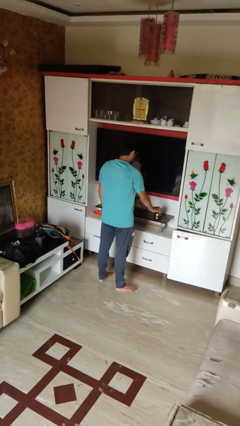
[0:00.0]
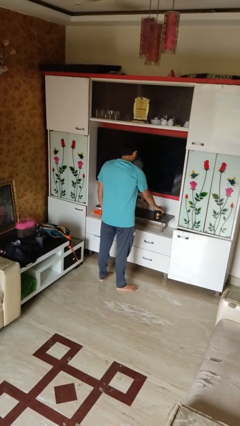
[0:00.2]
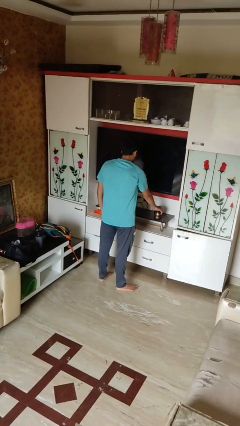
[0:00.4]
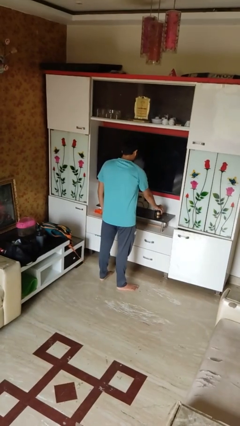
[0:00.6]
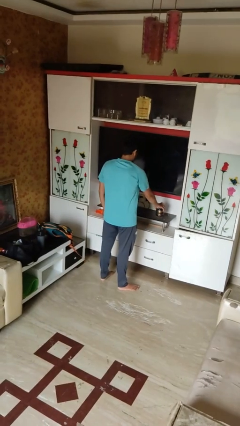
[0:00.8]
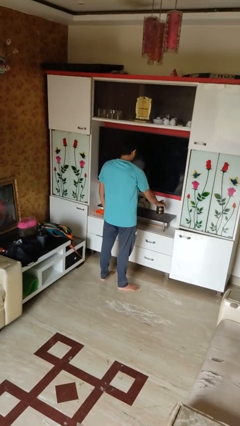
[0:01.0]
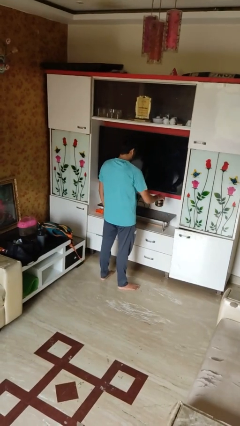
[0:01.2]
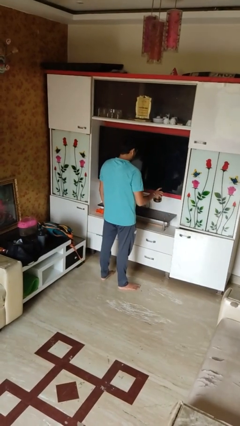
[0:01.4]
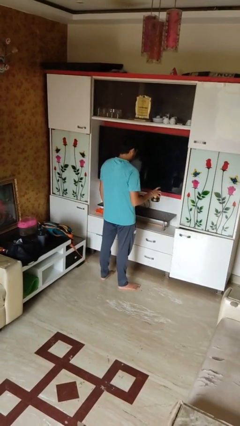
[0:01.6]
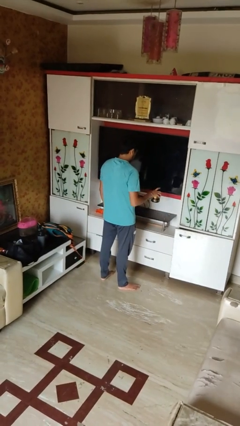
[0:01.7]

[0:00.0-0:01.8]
person picks up object from countertop

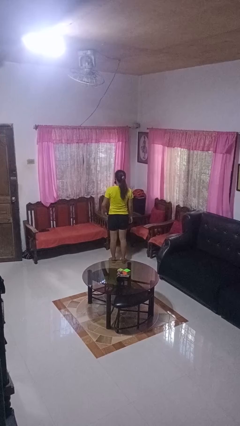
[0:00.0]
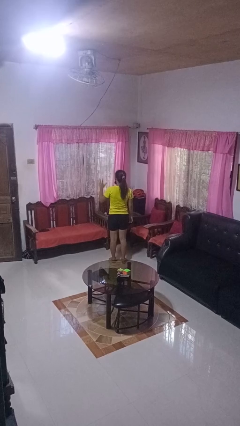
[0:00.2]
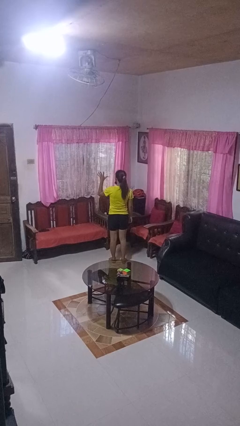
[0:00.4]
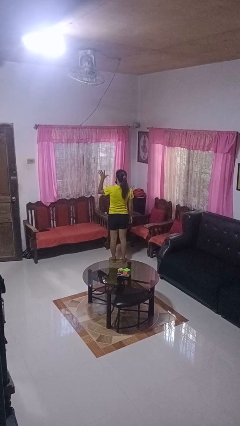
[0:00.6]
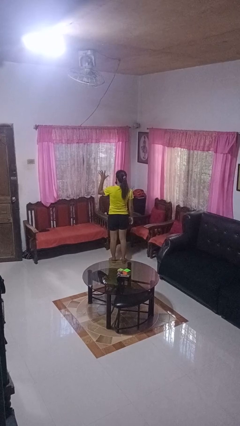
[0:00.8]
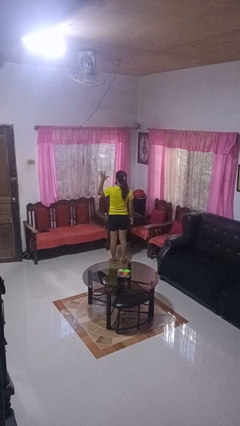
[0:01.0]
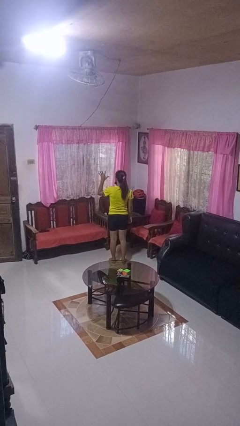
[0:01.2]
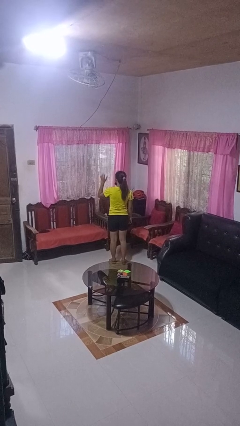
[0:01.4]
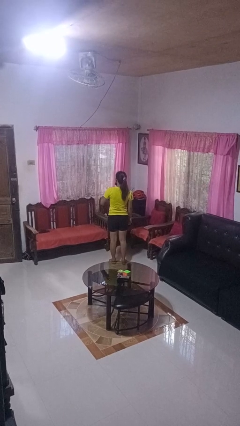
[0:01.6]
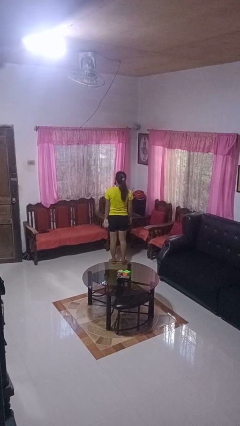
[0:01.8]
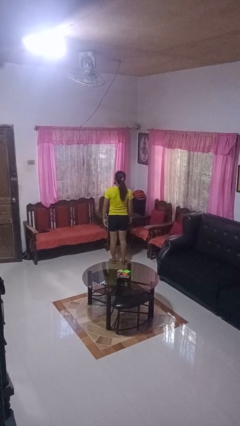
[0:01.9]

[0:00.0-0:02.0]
person gestures number five

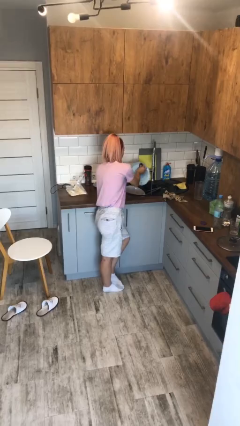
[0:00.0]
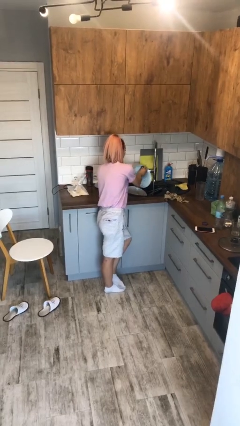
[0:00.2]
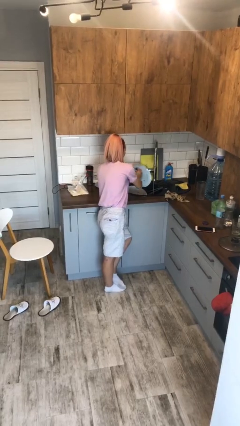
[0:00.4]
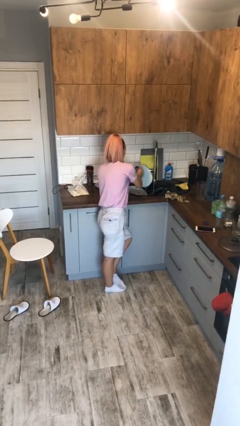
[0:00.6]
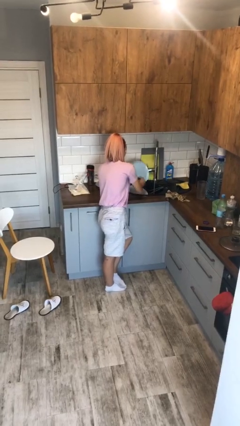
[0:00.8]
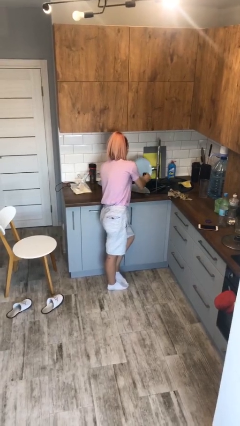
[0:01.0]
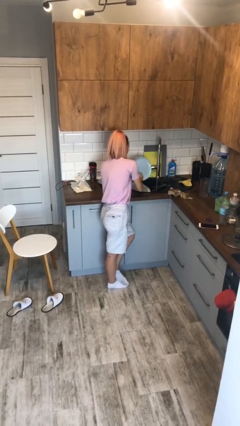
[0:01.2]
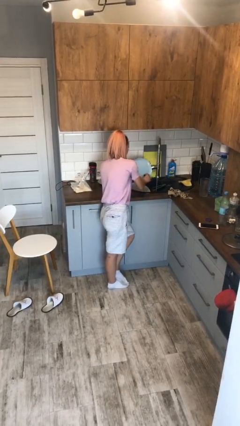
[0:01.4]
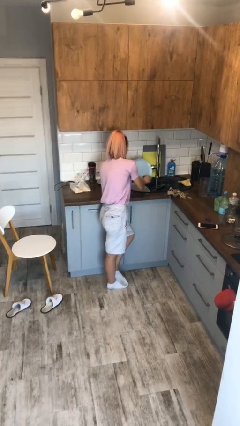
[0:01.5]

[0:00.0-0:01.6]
person washes dish

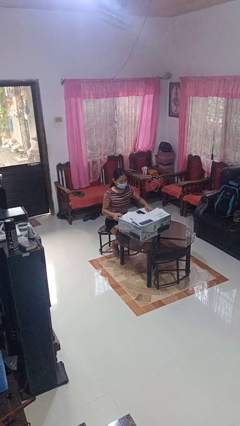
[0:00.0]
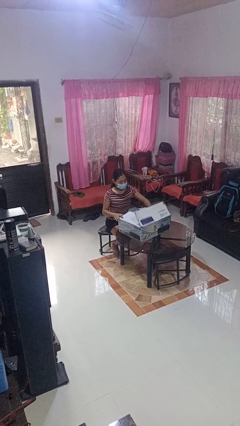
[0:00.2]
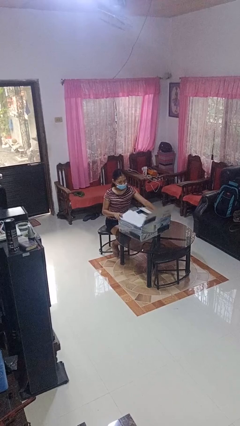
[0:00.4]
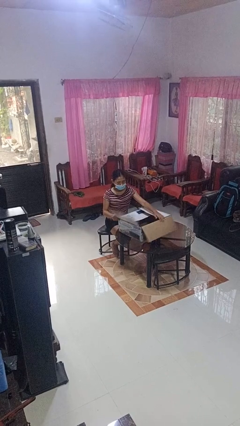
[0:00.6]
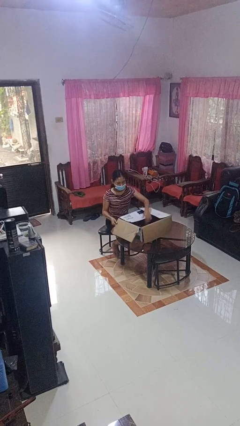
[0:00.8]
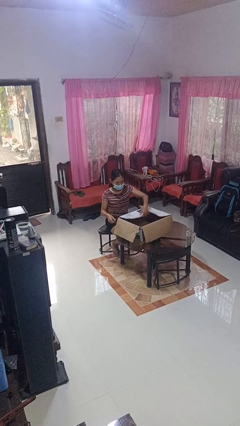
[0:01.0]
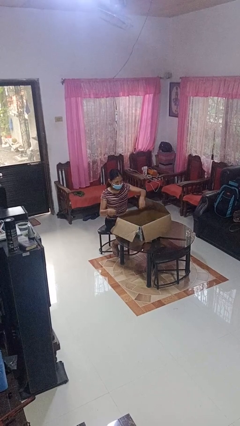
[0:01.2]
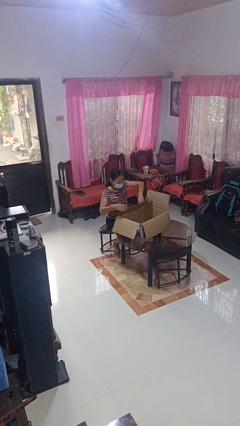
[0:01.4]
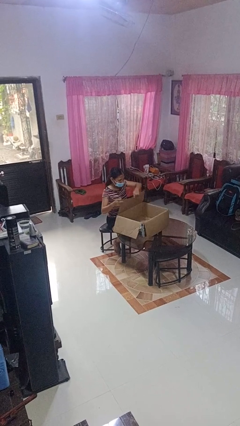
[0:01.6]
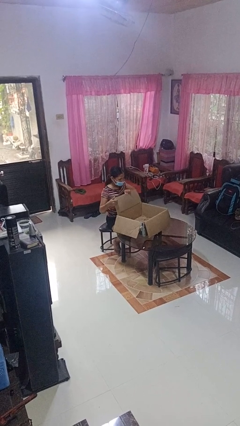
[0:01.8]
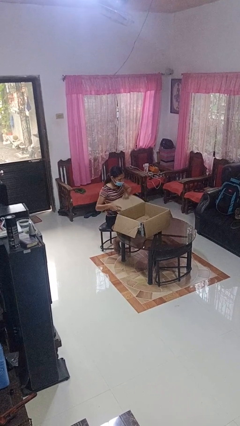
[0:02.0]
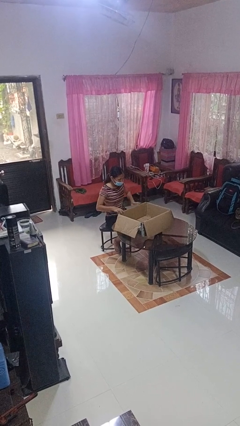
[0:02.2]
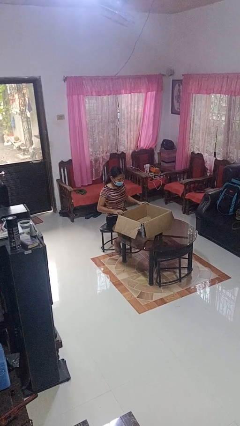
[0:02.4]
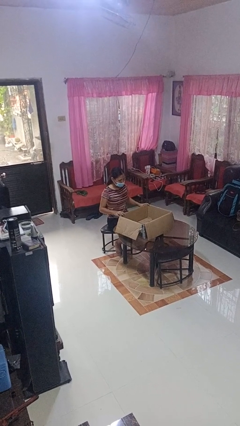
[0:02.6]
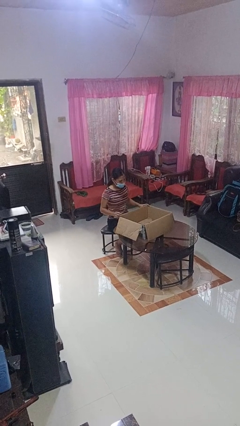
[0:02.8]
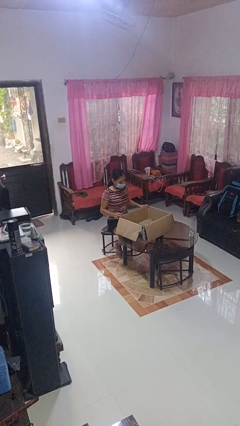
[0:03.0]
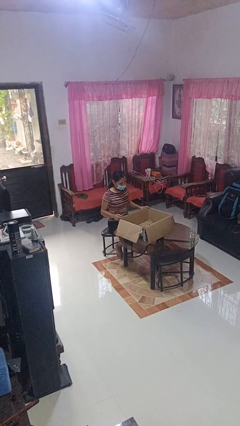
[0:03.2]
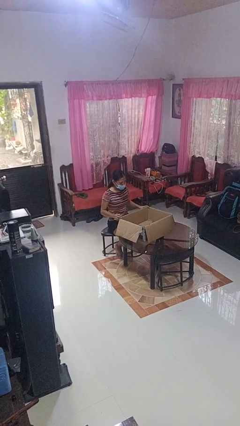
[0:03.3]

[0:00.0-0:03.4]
person opens box

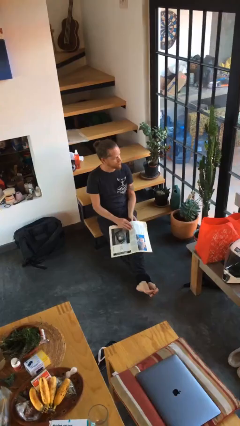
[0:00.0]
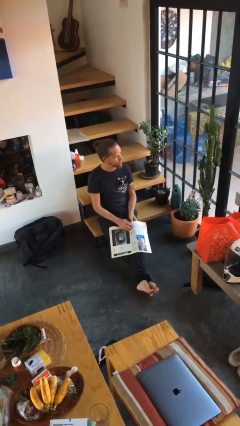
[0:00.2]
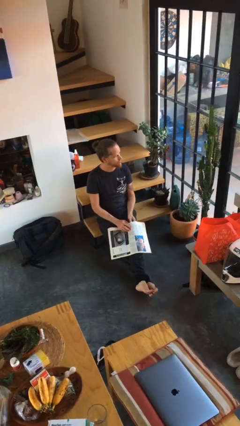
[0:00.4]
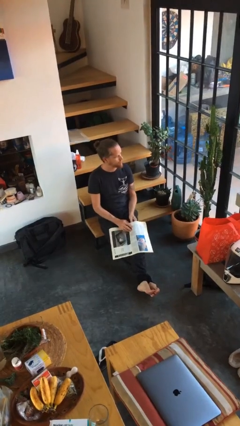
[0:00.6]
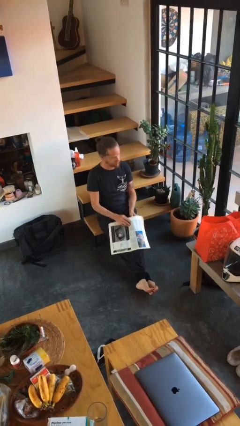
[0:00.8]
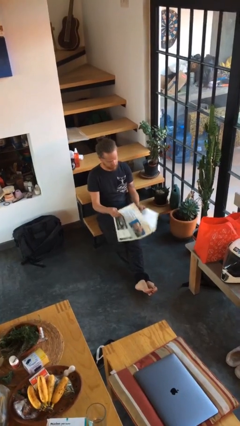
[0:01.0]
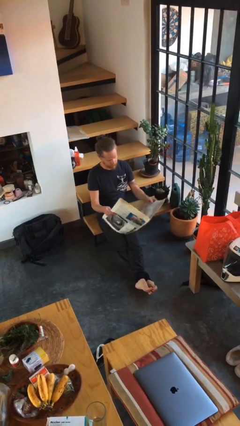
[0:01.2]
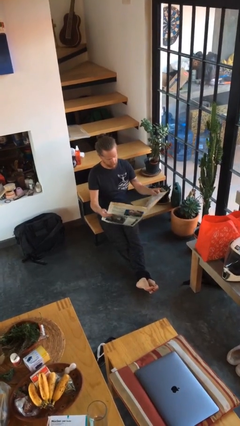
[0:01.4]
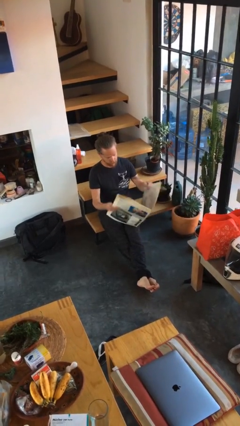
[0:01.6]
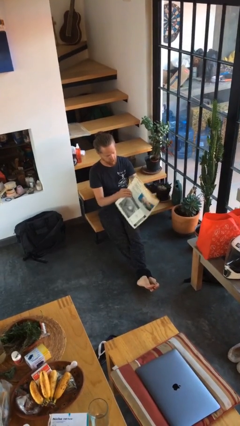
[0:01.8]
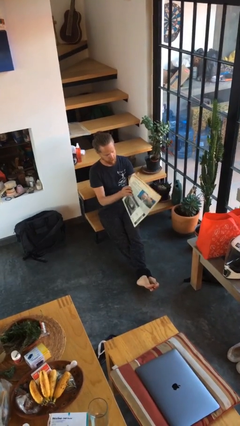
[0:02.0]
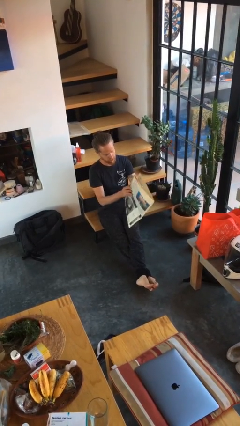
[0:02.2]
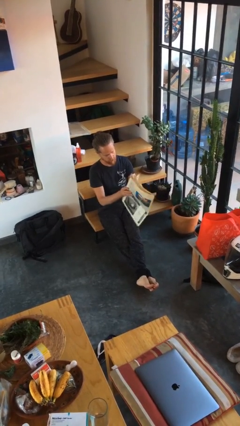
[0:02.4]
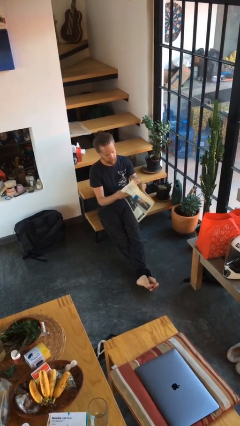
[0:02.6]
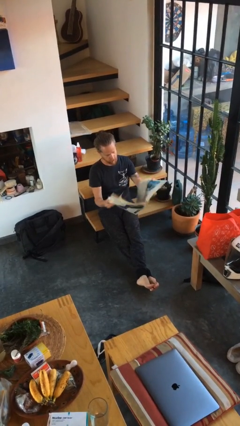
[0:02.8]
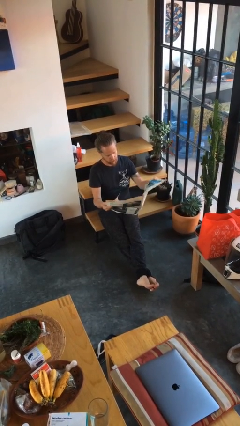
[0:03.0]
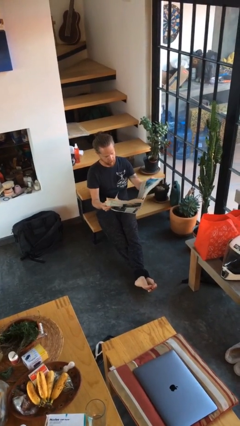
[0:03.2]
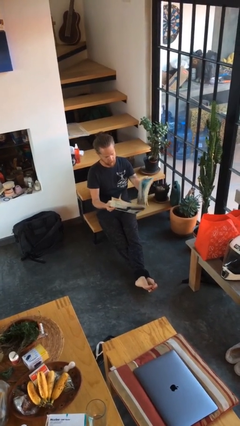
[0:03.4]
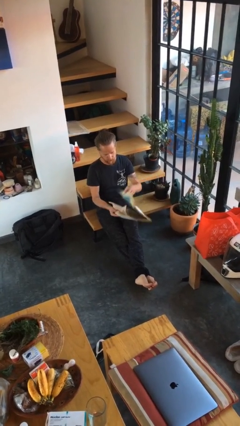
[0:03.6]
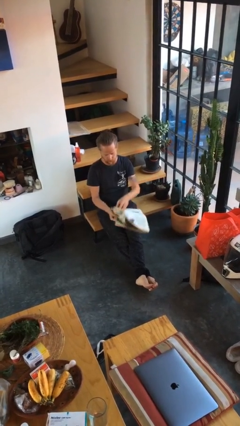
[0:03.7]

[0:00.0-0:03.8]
person reads newspaper

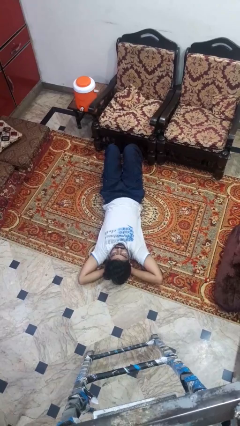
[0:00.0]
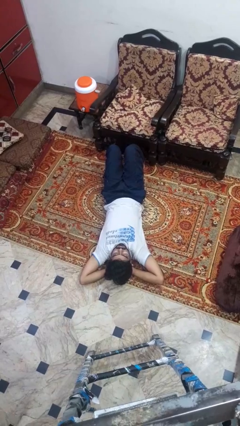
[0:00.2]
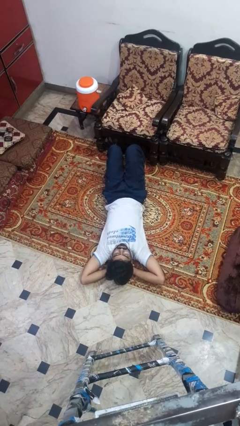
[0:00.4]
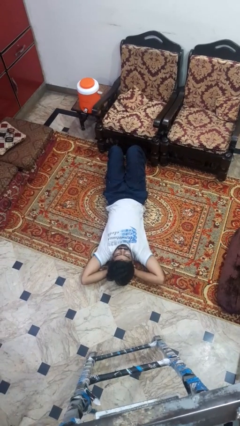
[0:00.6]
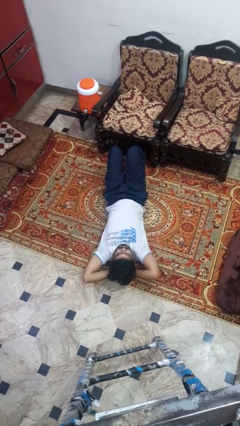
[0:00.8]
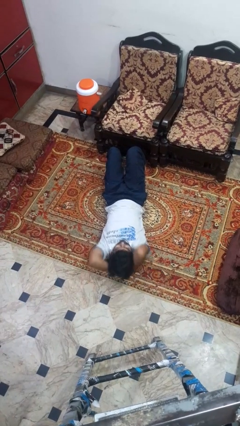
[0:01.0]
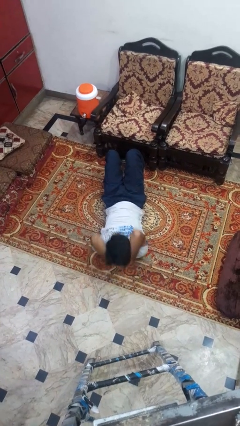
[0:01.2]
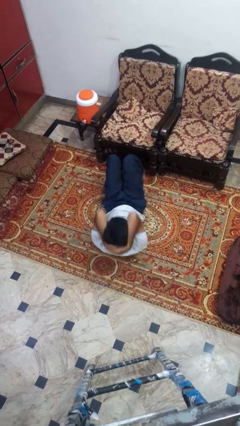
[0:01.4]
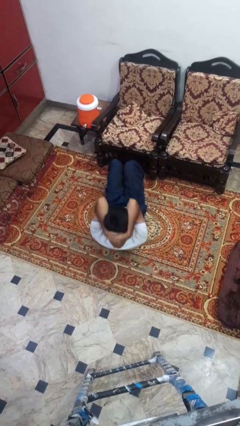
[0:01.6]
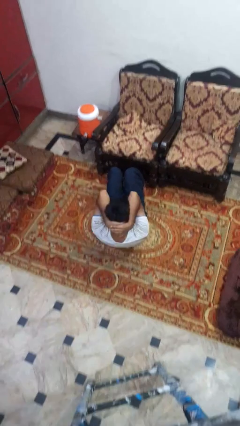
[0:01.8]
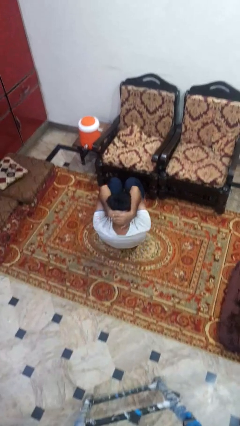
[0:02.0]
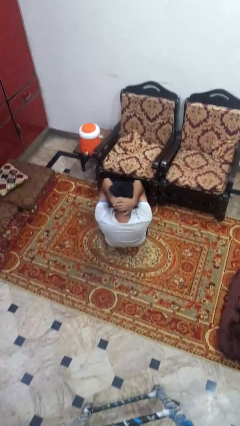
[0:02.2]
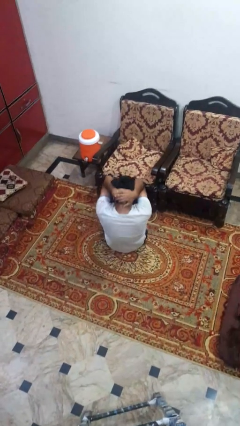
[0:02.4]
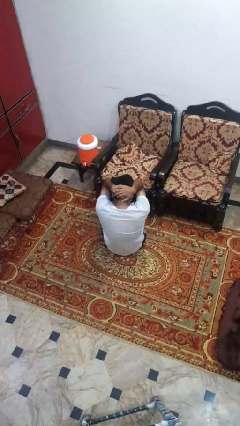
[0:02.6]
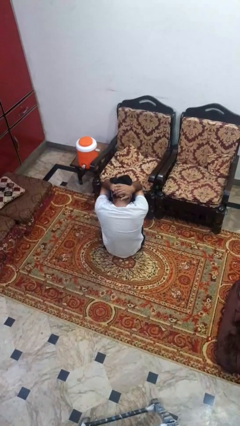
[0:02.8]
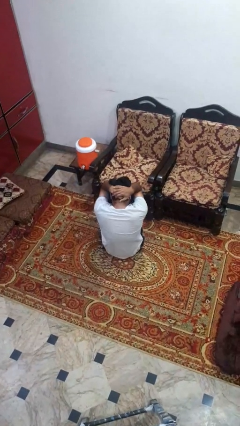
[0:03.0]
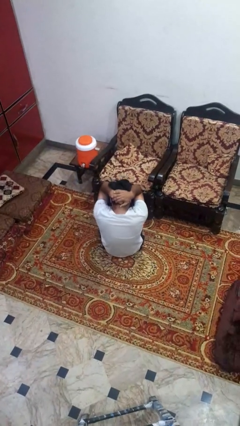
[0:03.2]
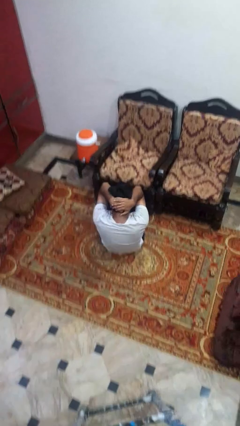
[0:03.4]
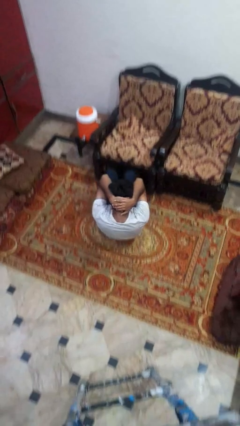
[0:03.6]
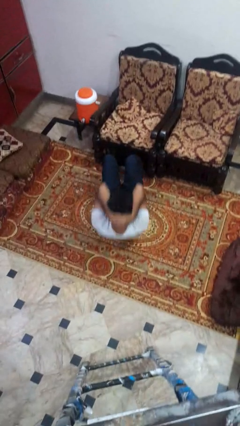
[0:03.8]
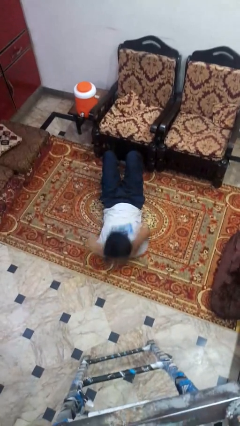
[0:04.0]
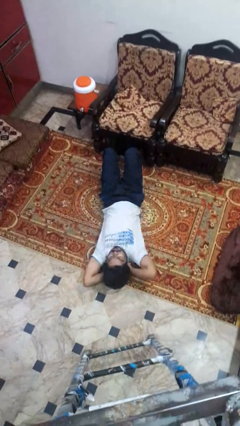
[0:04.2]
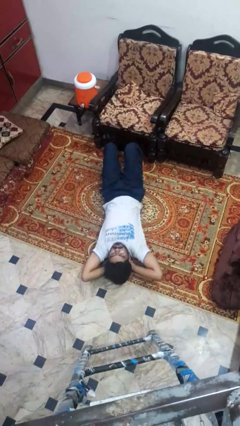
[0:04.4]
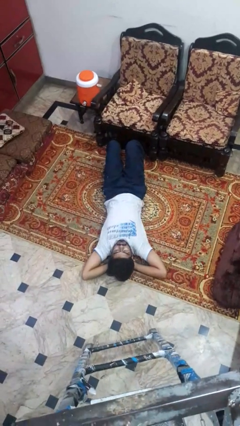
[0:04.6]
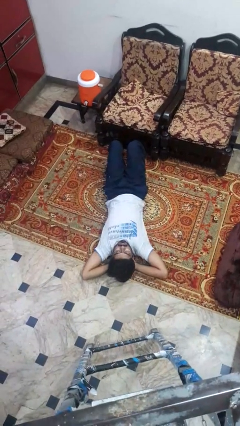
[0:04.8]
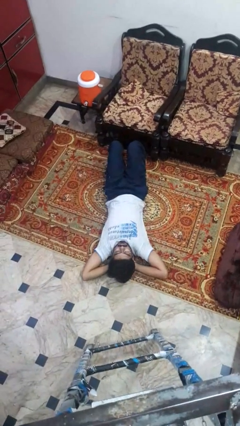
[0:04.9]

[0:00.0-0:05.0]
person exercises with situp
